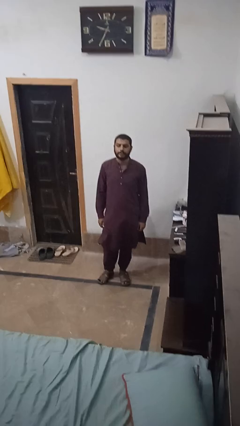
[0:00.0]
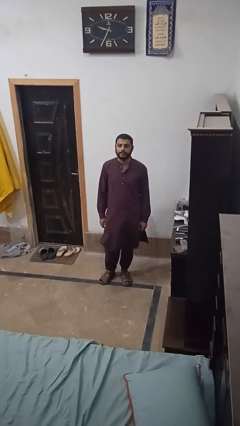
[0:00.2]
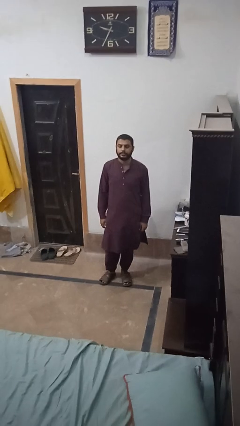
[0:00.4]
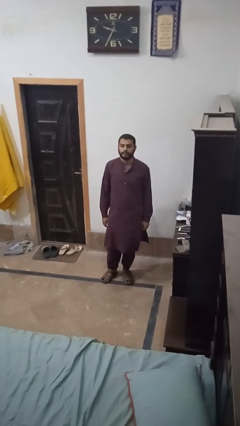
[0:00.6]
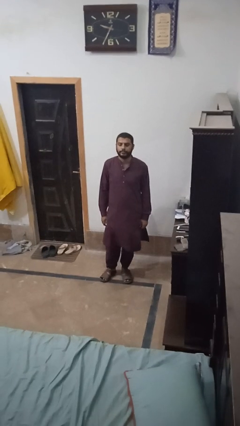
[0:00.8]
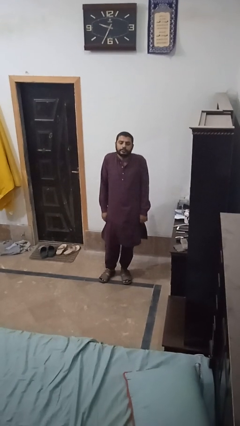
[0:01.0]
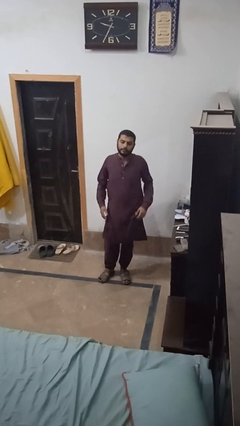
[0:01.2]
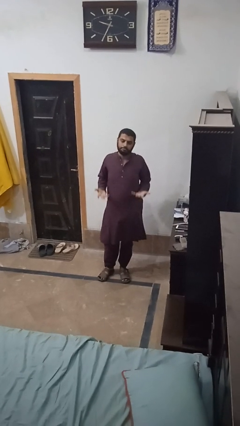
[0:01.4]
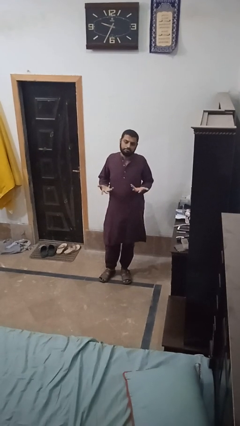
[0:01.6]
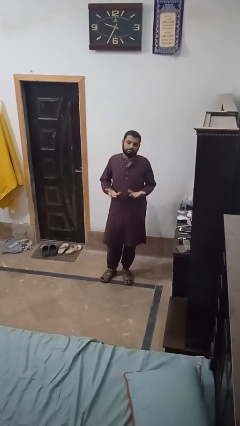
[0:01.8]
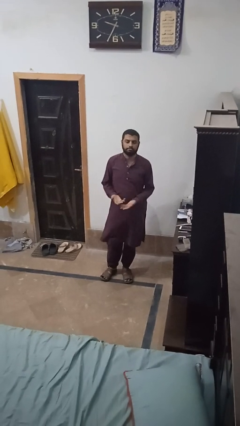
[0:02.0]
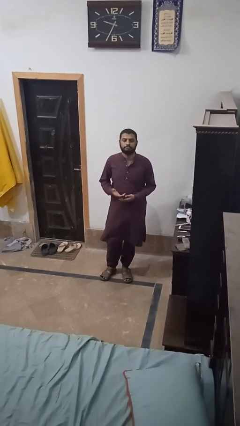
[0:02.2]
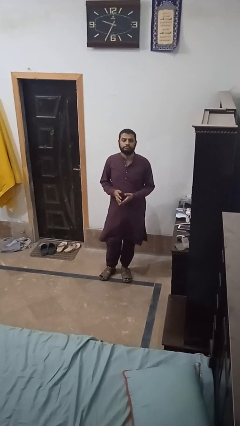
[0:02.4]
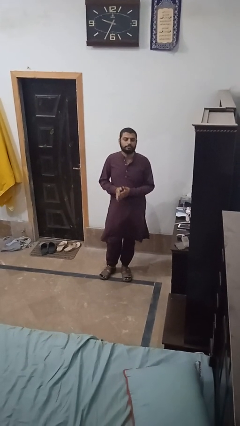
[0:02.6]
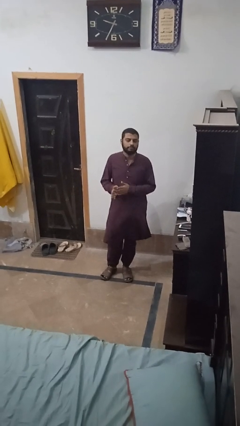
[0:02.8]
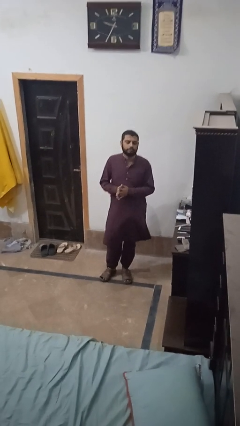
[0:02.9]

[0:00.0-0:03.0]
person shrugs

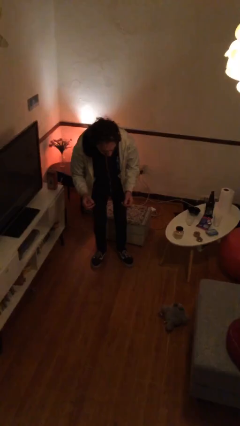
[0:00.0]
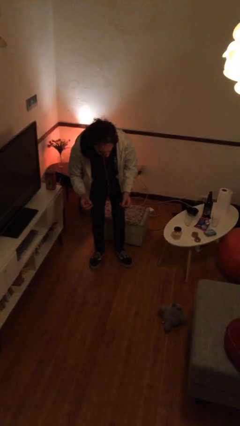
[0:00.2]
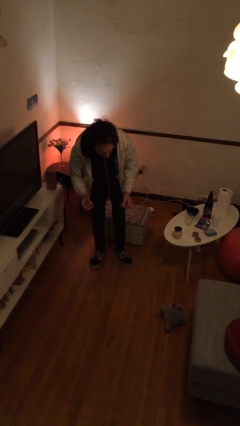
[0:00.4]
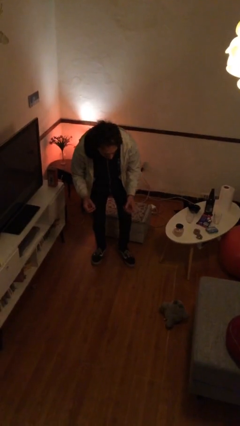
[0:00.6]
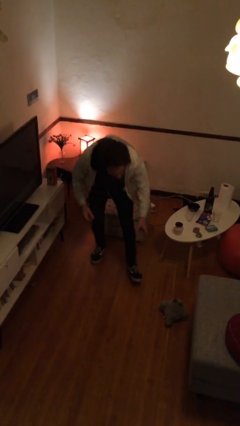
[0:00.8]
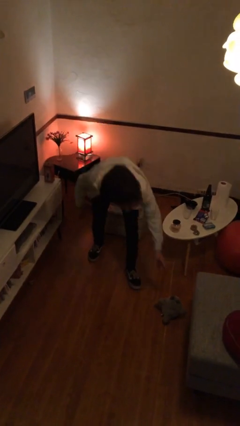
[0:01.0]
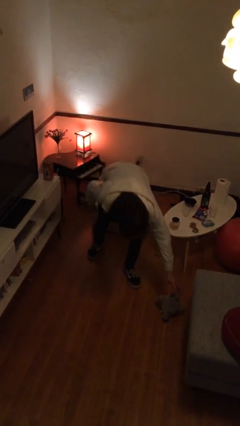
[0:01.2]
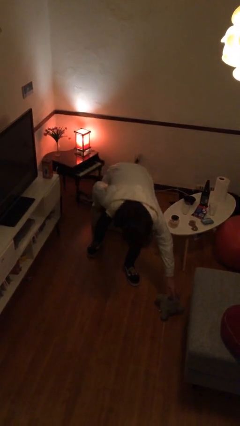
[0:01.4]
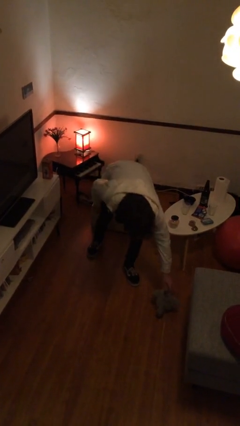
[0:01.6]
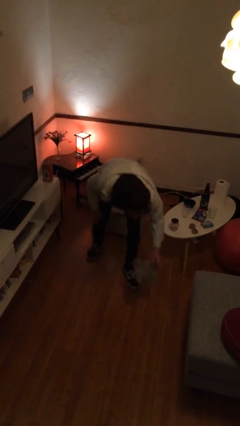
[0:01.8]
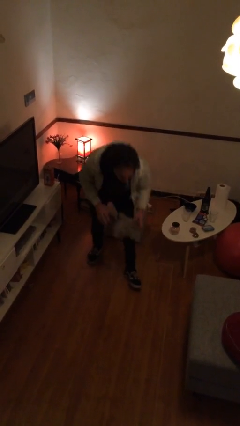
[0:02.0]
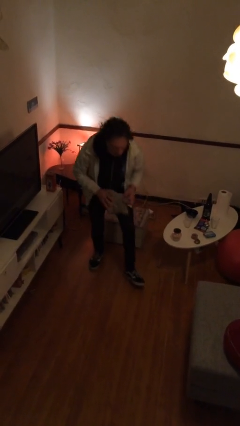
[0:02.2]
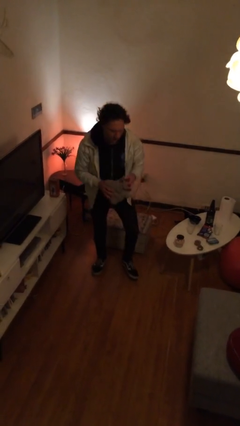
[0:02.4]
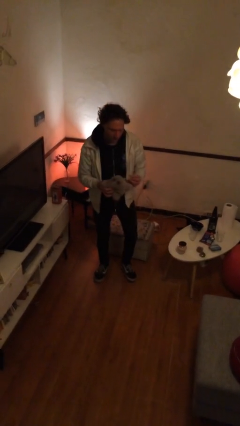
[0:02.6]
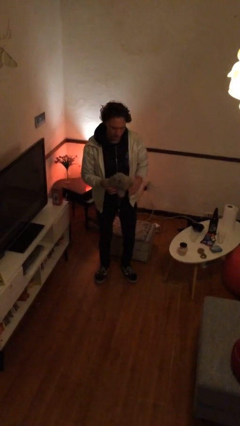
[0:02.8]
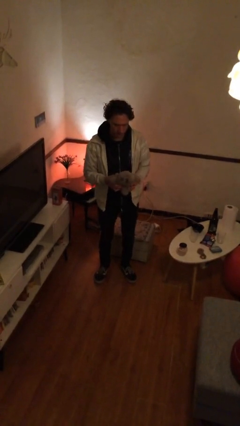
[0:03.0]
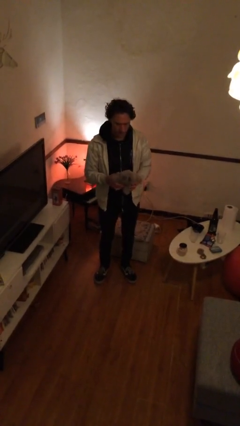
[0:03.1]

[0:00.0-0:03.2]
person picks up object from floor

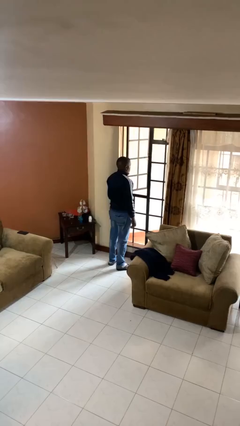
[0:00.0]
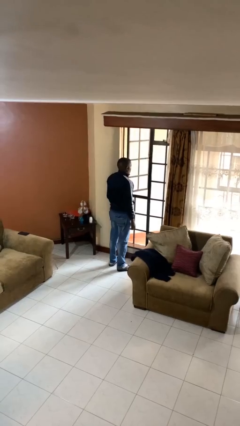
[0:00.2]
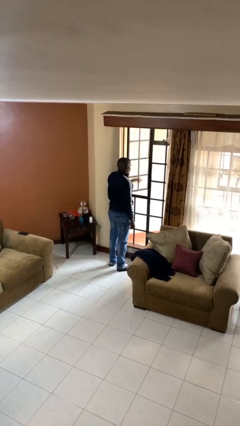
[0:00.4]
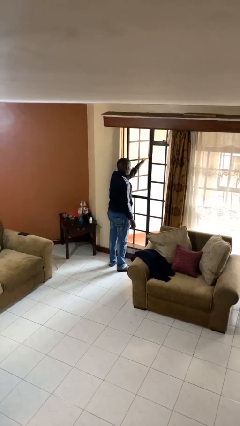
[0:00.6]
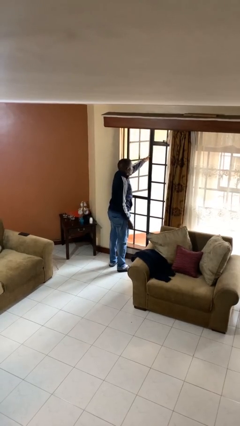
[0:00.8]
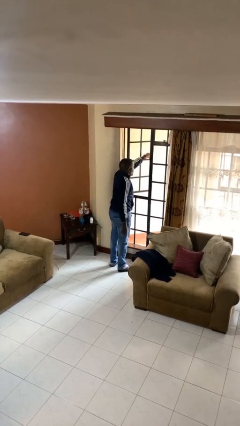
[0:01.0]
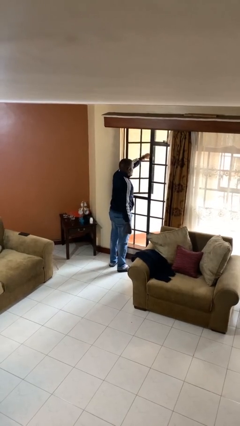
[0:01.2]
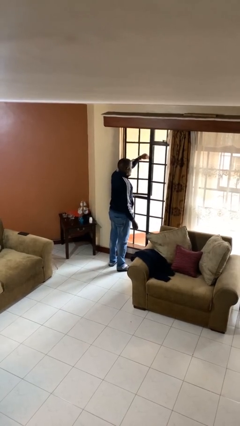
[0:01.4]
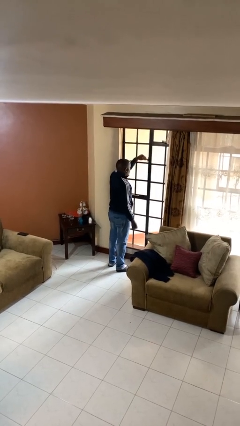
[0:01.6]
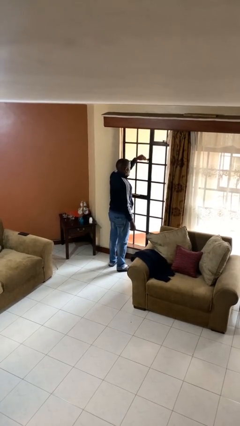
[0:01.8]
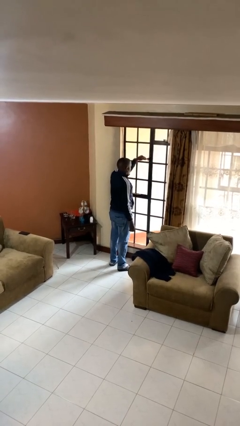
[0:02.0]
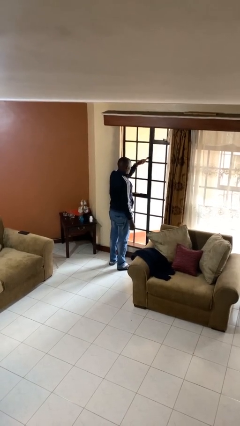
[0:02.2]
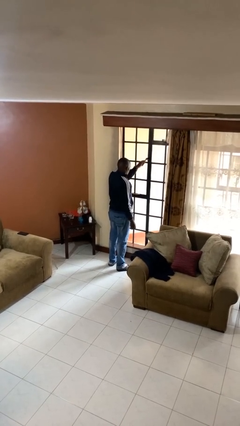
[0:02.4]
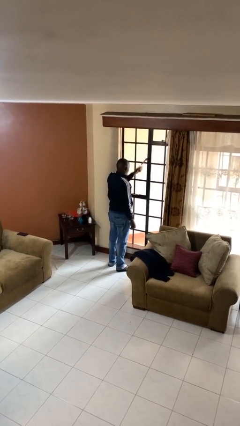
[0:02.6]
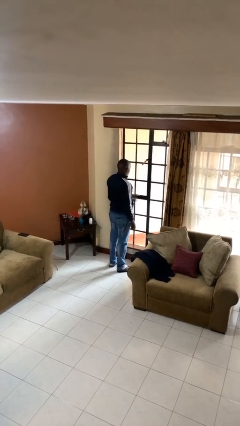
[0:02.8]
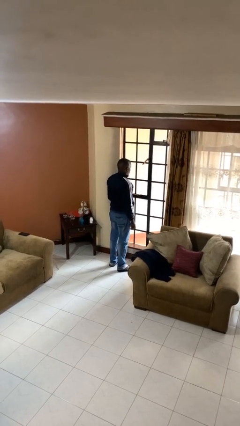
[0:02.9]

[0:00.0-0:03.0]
person closes home window

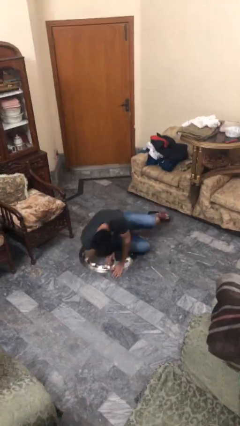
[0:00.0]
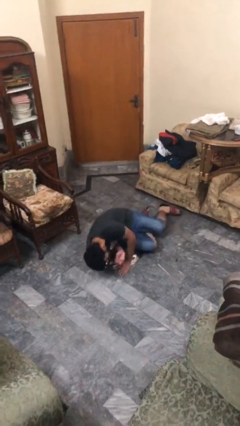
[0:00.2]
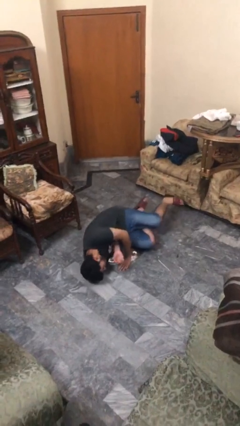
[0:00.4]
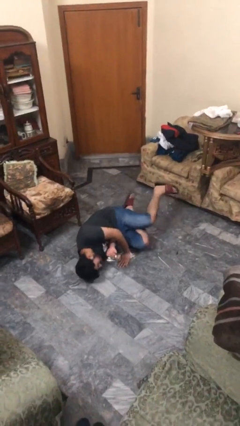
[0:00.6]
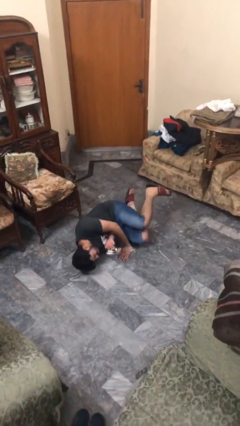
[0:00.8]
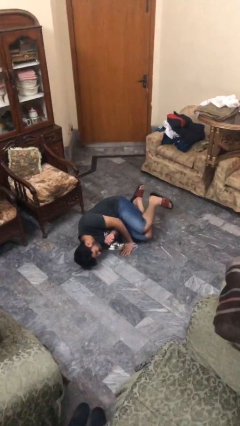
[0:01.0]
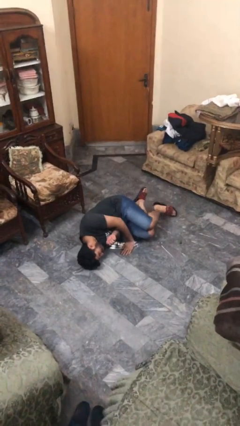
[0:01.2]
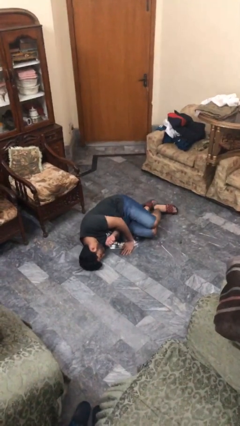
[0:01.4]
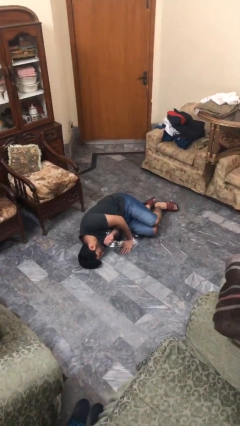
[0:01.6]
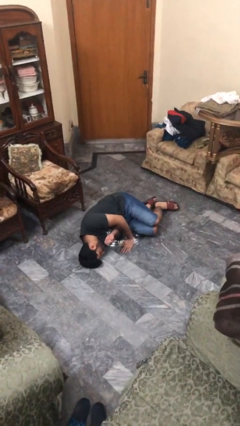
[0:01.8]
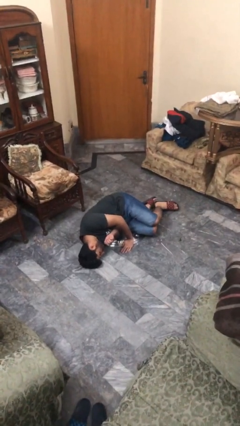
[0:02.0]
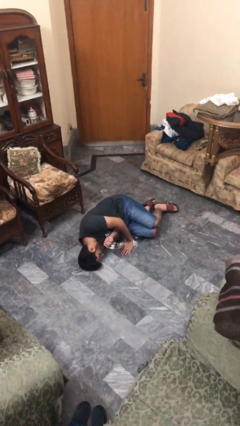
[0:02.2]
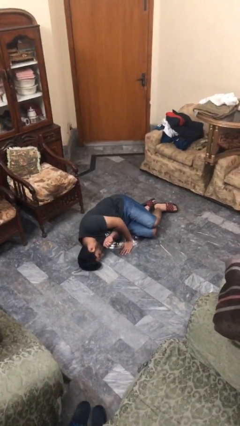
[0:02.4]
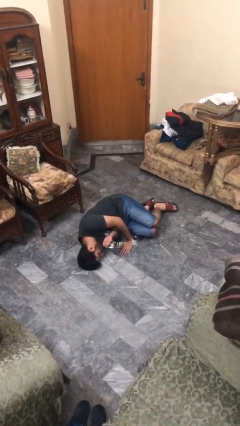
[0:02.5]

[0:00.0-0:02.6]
person lies down on floor

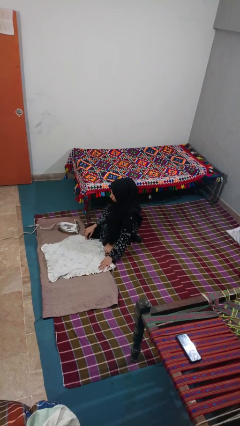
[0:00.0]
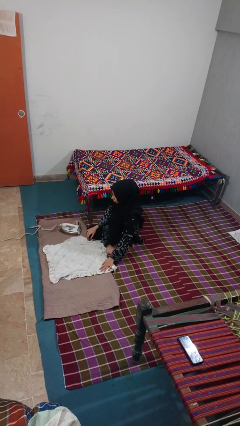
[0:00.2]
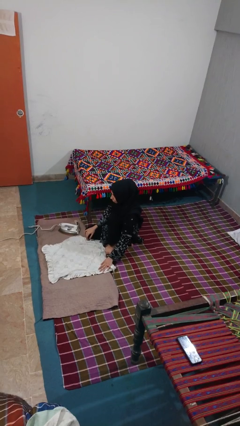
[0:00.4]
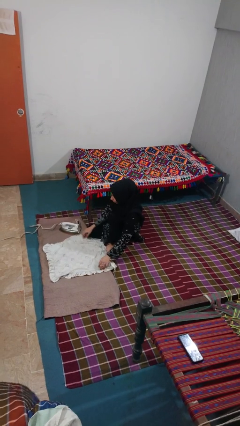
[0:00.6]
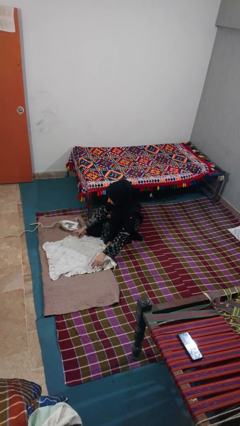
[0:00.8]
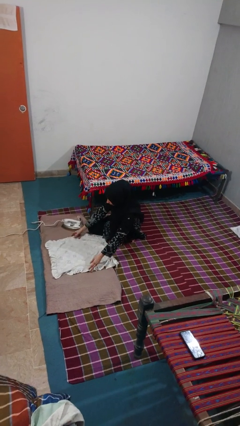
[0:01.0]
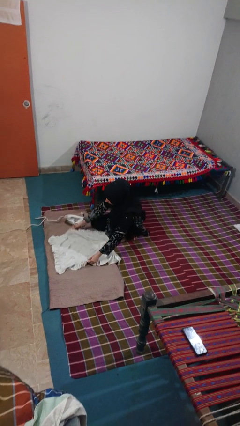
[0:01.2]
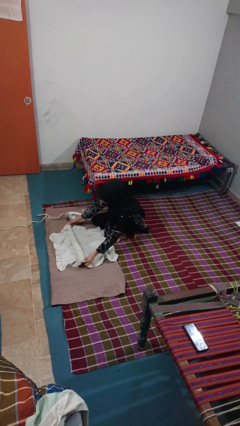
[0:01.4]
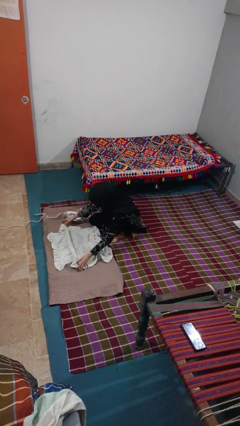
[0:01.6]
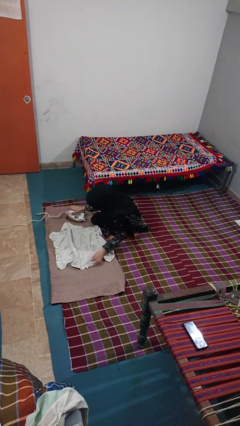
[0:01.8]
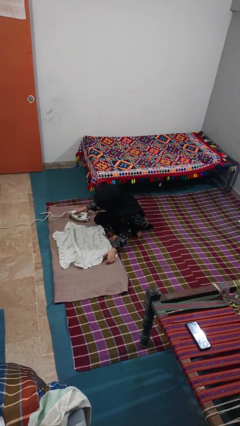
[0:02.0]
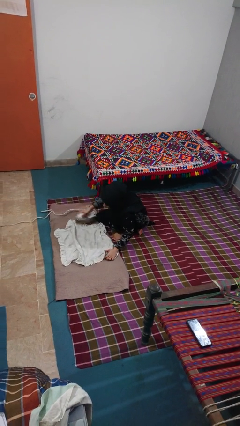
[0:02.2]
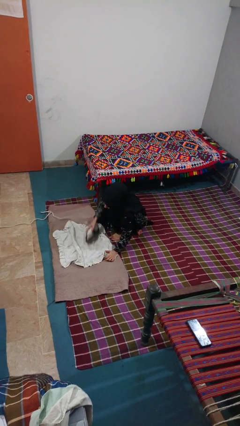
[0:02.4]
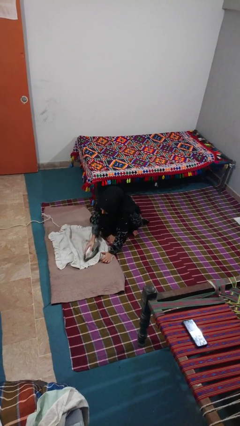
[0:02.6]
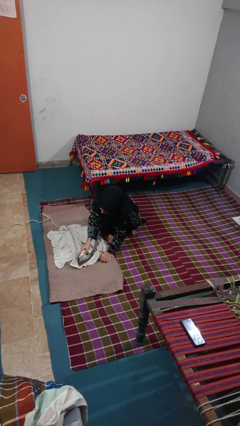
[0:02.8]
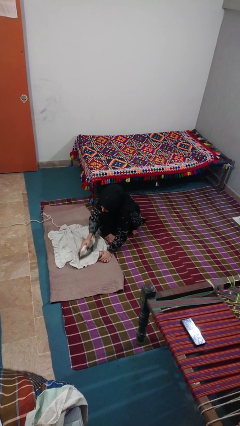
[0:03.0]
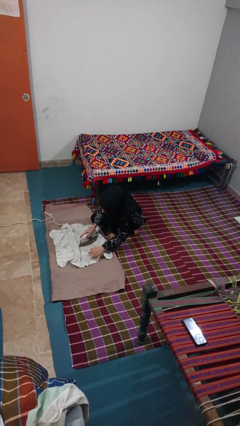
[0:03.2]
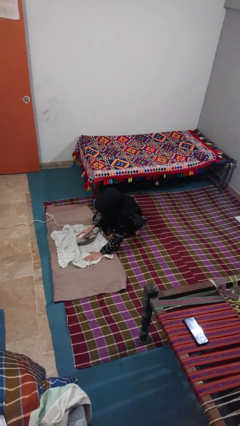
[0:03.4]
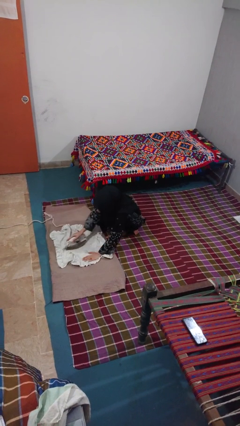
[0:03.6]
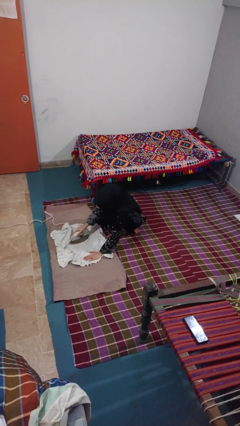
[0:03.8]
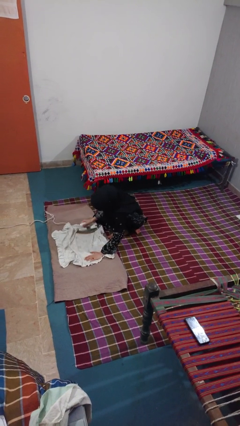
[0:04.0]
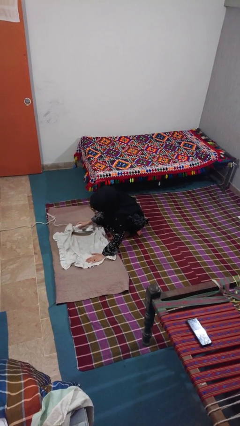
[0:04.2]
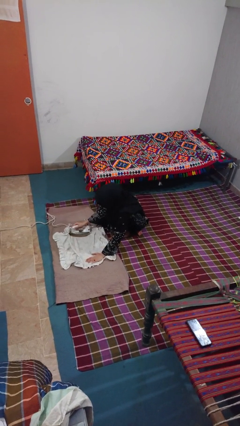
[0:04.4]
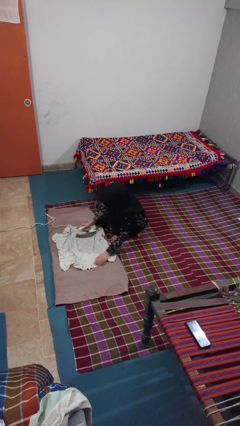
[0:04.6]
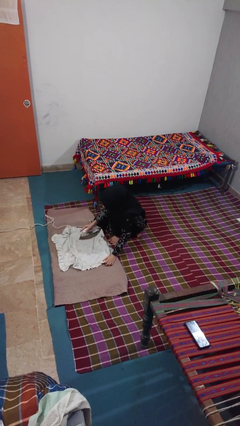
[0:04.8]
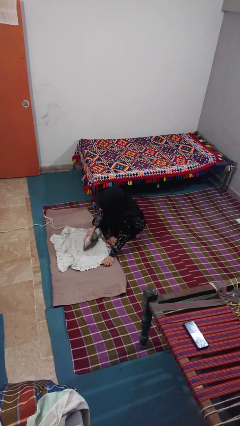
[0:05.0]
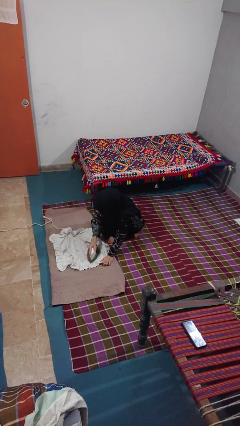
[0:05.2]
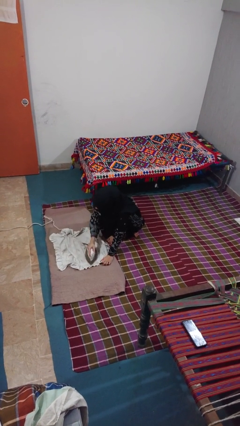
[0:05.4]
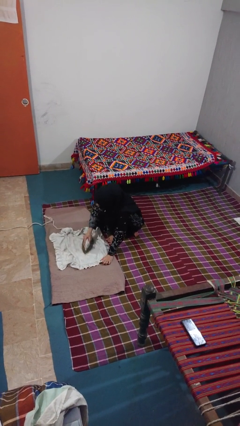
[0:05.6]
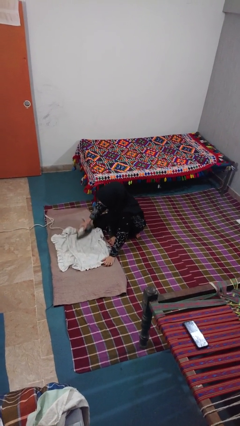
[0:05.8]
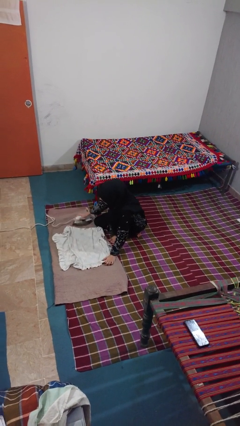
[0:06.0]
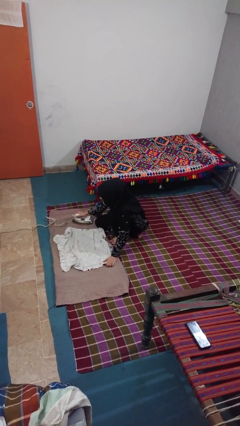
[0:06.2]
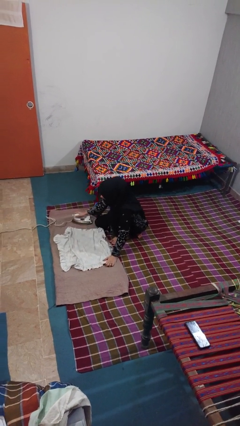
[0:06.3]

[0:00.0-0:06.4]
person irons clothes
